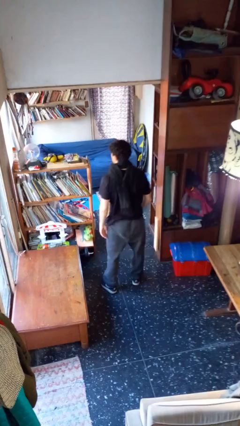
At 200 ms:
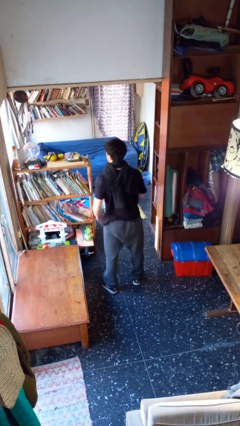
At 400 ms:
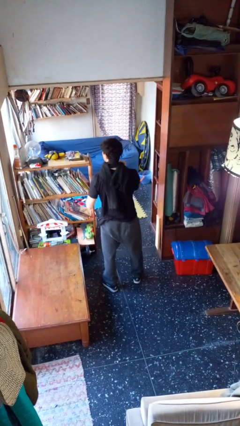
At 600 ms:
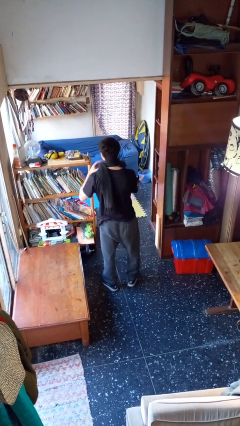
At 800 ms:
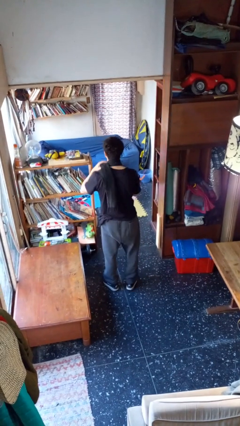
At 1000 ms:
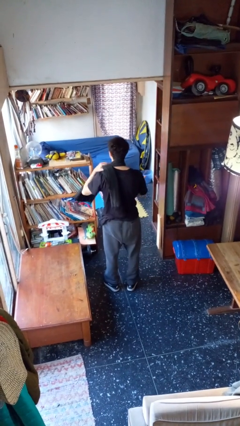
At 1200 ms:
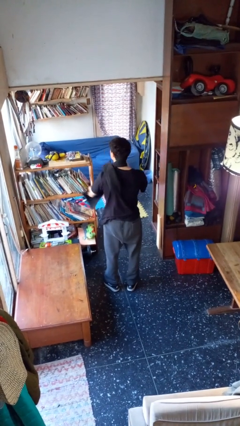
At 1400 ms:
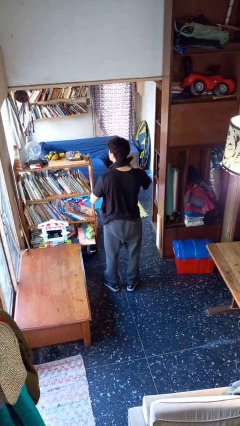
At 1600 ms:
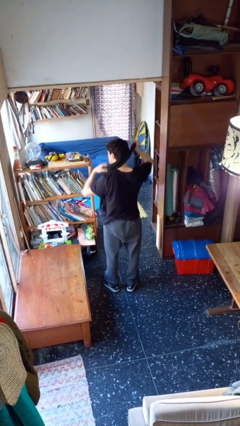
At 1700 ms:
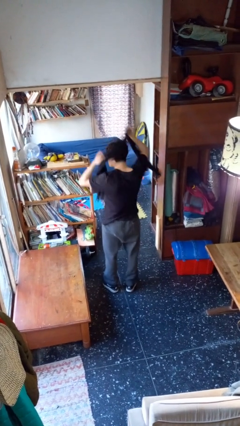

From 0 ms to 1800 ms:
person takes off scarf

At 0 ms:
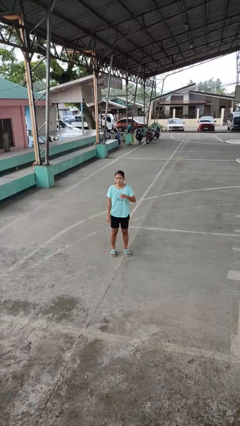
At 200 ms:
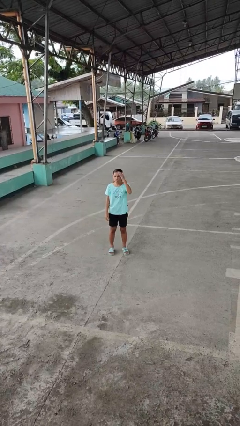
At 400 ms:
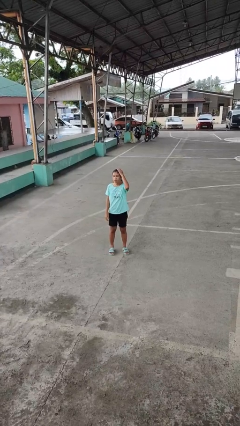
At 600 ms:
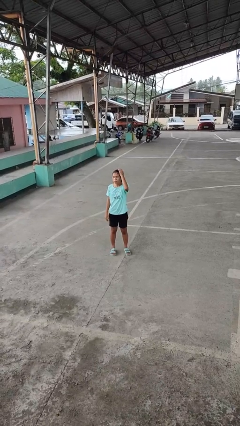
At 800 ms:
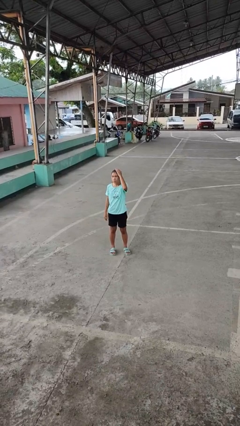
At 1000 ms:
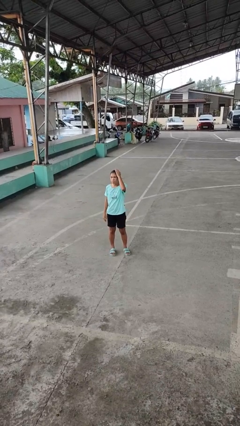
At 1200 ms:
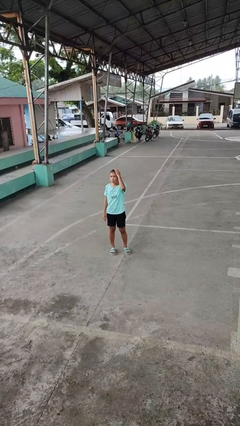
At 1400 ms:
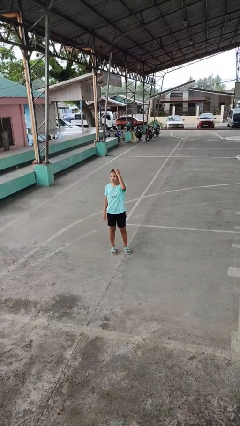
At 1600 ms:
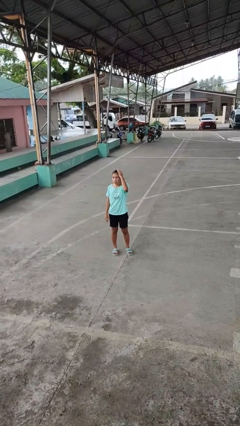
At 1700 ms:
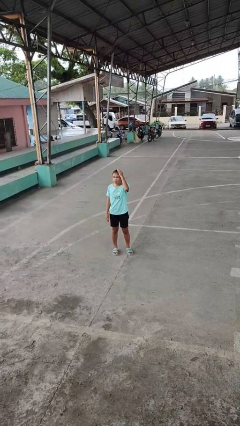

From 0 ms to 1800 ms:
person pats head

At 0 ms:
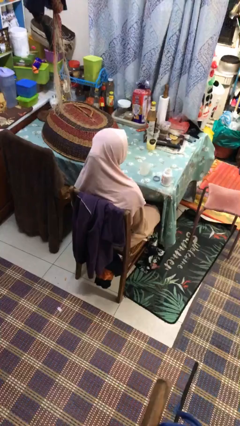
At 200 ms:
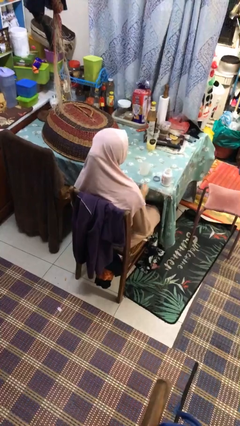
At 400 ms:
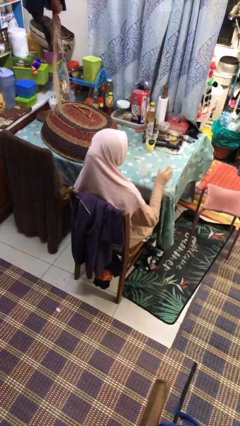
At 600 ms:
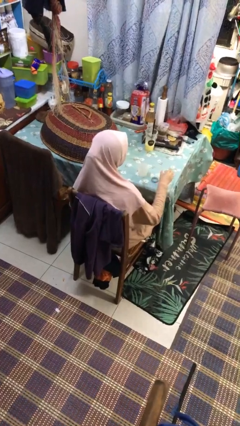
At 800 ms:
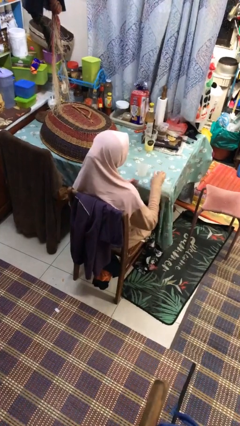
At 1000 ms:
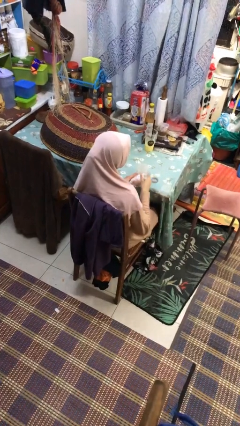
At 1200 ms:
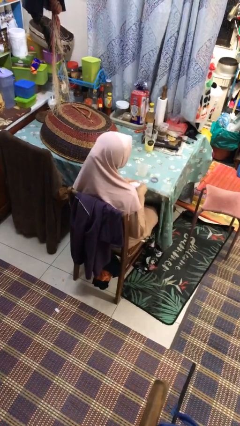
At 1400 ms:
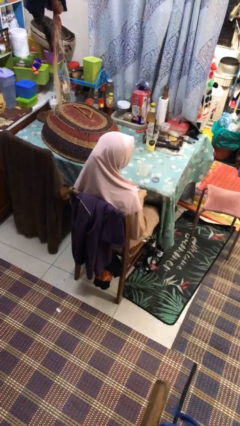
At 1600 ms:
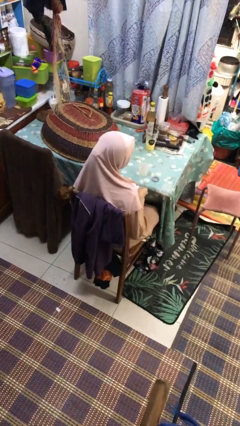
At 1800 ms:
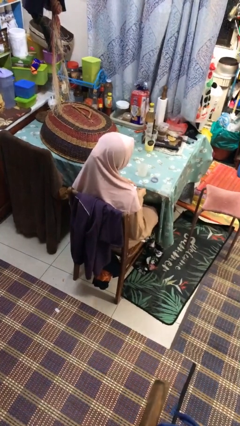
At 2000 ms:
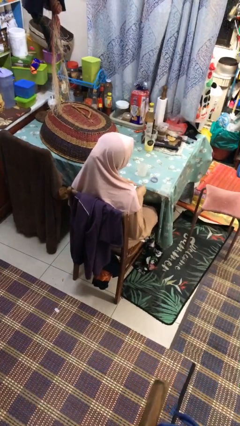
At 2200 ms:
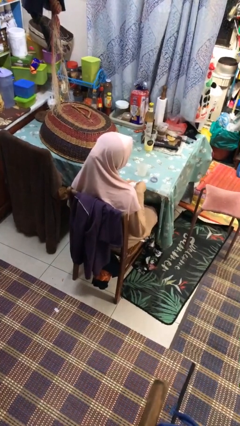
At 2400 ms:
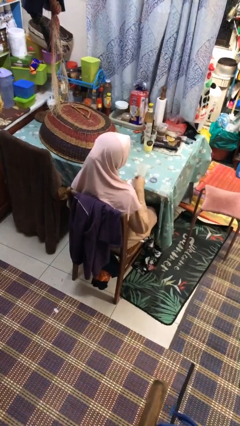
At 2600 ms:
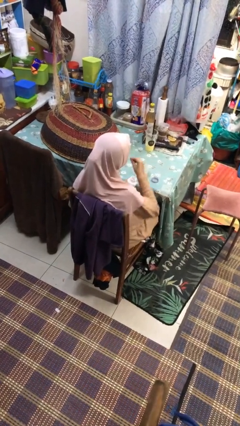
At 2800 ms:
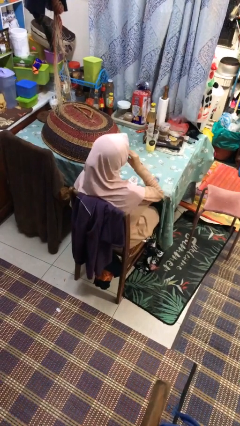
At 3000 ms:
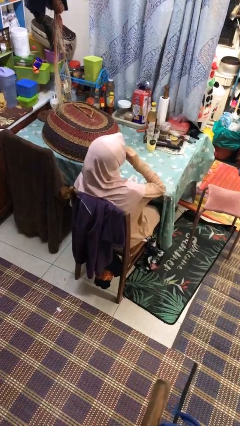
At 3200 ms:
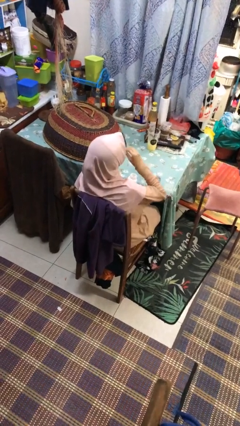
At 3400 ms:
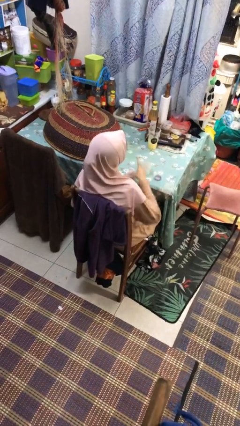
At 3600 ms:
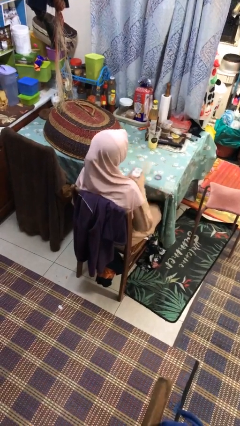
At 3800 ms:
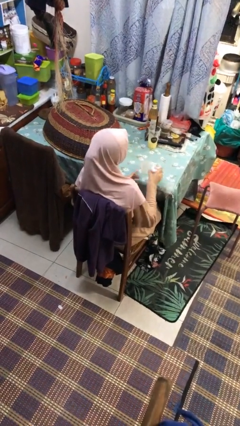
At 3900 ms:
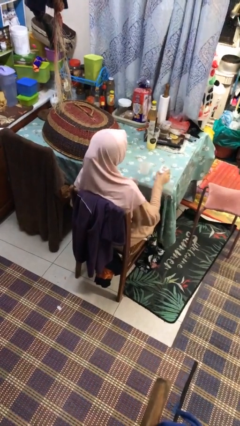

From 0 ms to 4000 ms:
person takes medicine pills

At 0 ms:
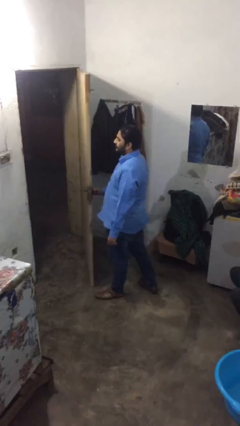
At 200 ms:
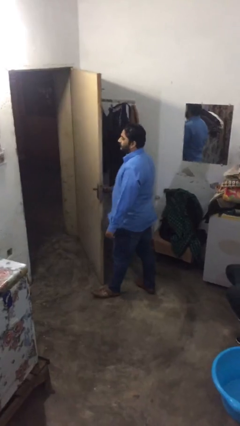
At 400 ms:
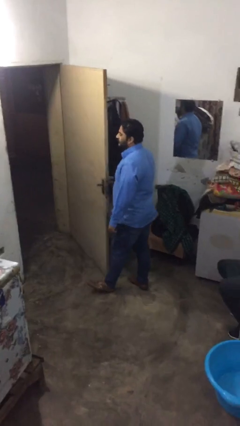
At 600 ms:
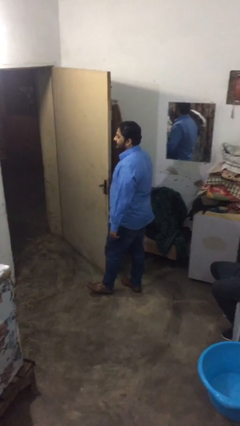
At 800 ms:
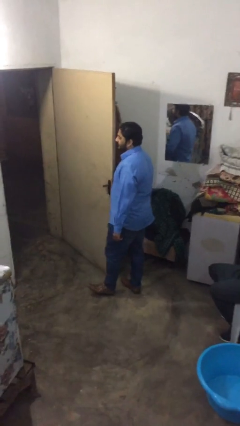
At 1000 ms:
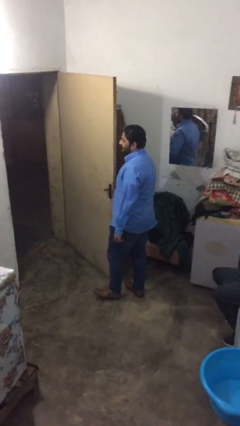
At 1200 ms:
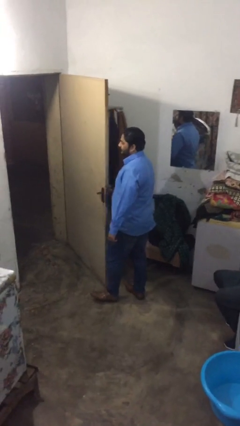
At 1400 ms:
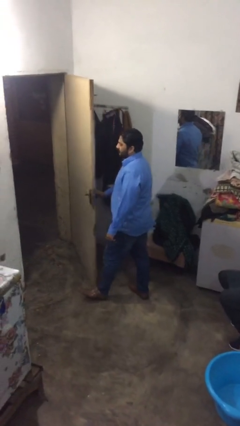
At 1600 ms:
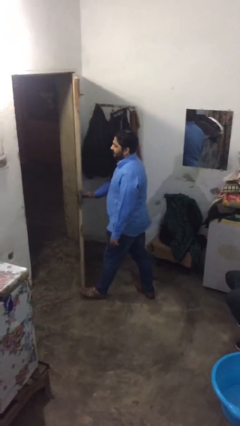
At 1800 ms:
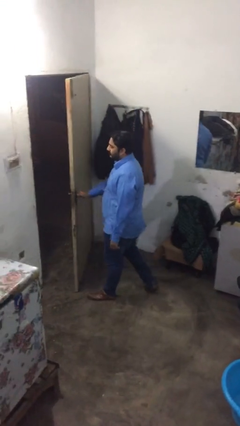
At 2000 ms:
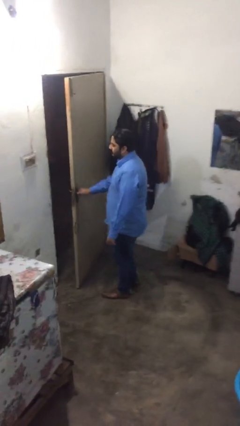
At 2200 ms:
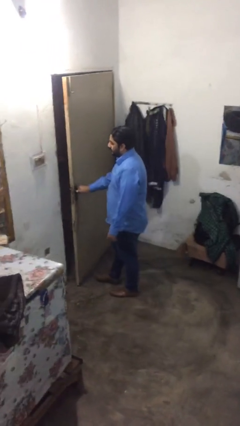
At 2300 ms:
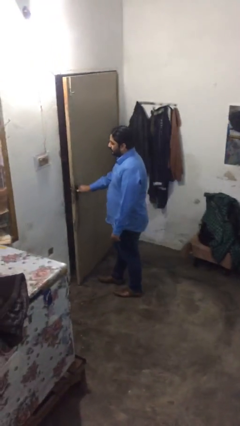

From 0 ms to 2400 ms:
person closes facility door

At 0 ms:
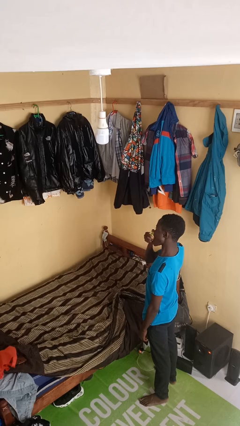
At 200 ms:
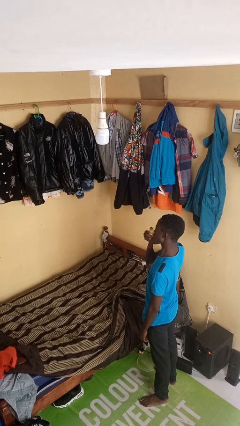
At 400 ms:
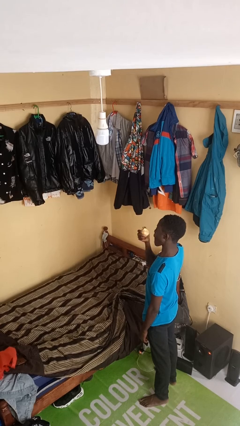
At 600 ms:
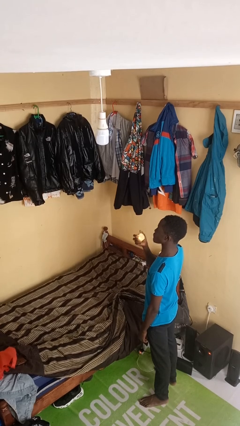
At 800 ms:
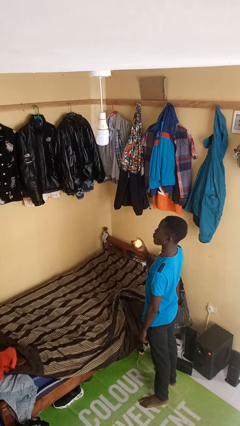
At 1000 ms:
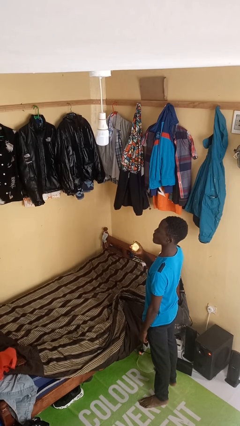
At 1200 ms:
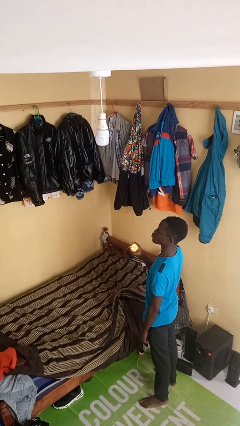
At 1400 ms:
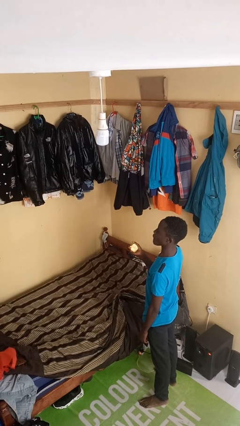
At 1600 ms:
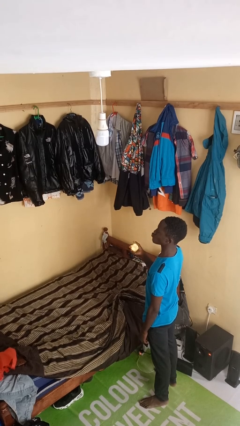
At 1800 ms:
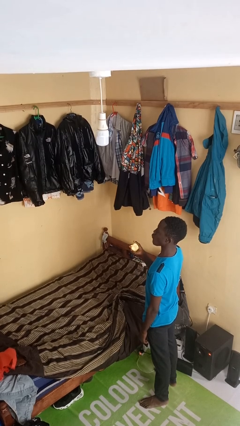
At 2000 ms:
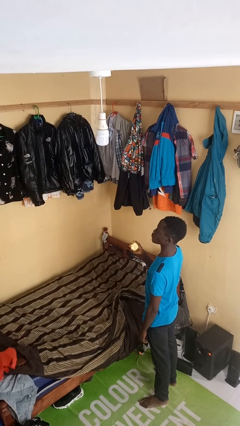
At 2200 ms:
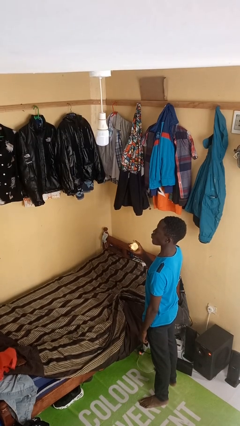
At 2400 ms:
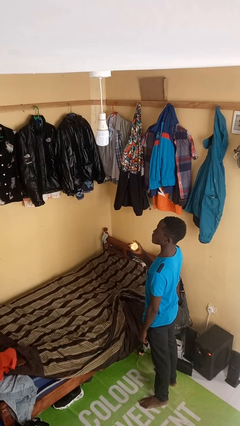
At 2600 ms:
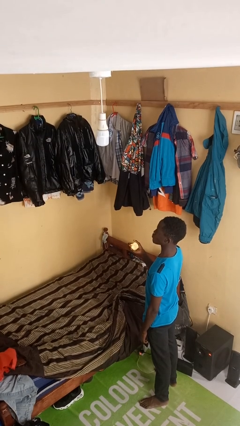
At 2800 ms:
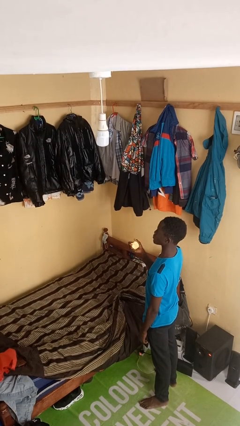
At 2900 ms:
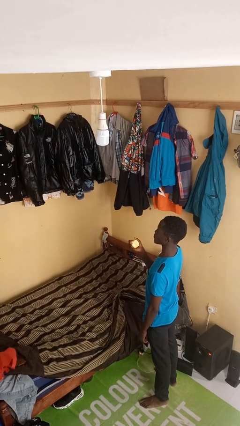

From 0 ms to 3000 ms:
person eats apple

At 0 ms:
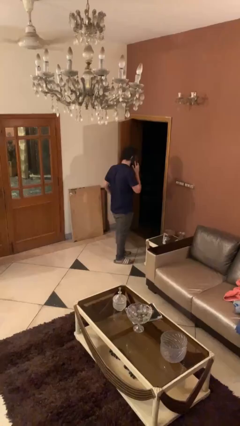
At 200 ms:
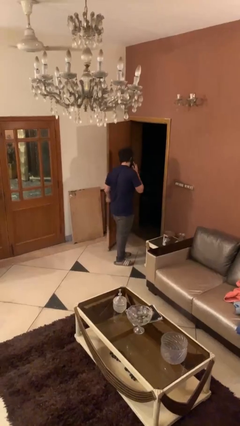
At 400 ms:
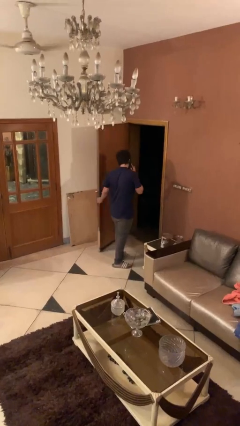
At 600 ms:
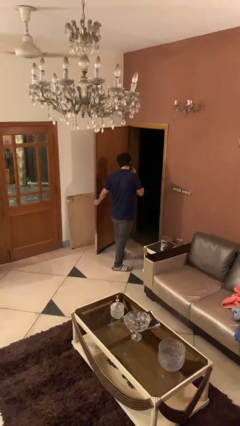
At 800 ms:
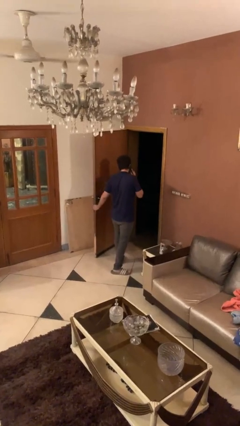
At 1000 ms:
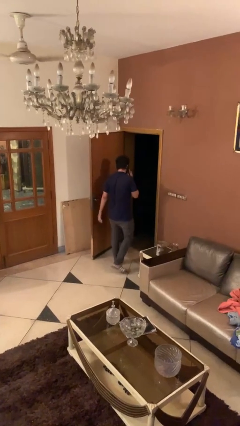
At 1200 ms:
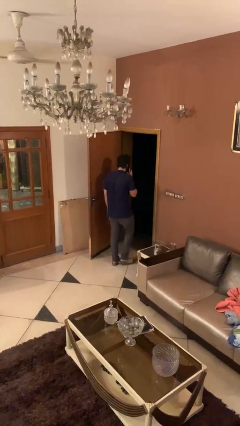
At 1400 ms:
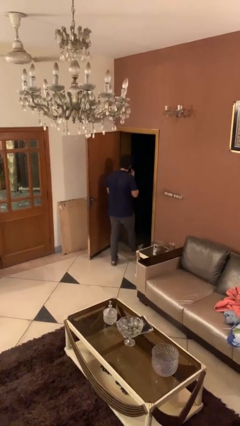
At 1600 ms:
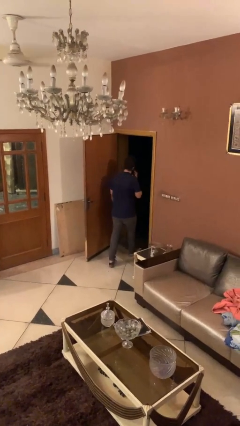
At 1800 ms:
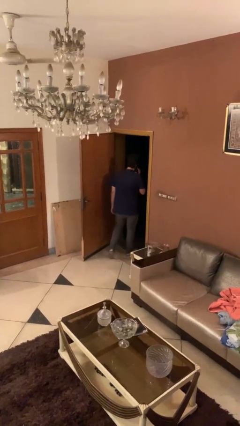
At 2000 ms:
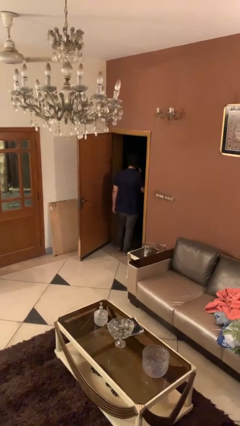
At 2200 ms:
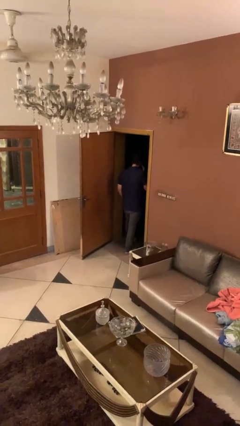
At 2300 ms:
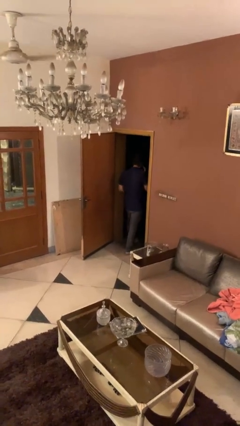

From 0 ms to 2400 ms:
person exits scene through structure

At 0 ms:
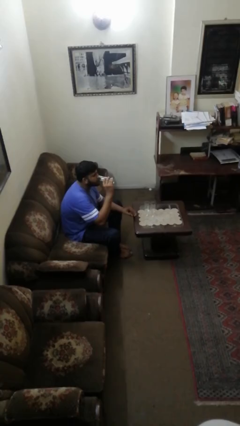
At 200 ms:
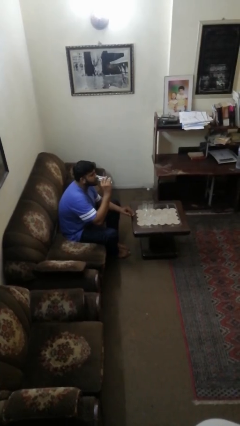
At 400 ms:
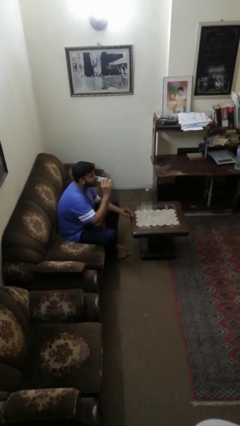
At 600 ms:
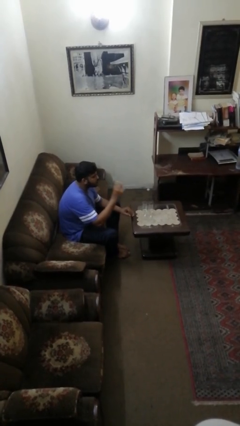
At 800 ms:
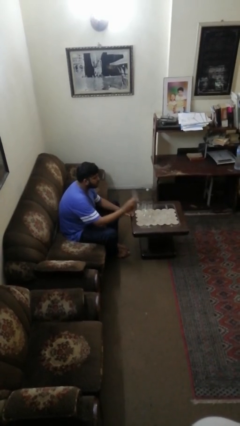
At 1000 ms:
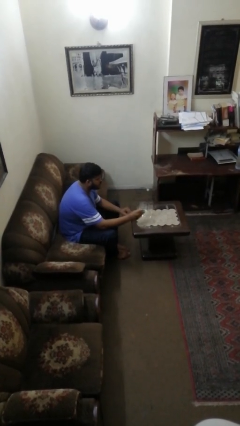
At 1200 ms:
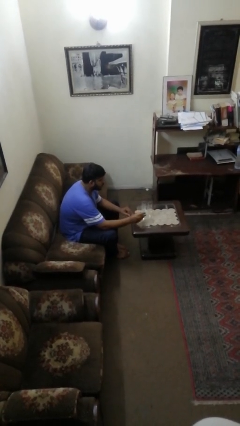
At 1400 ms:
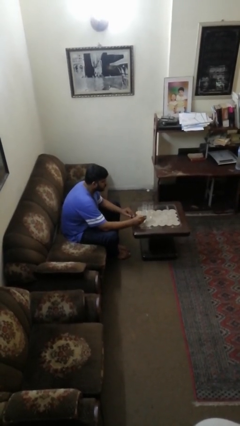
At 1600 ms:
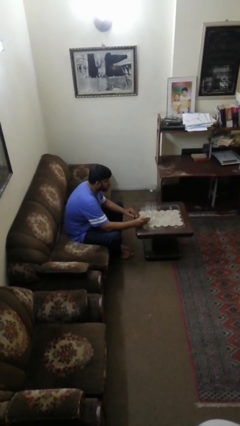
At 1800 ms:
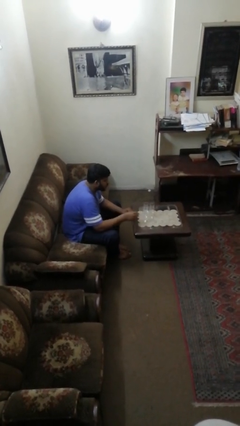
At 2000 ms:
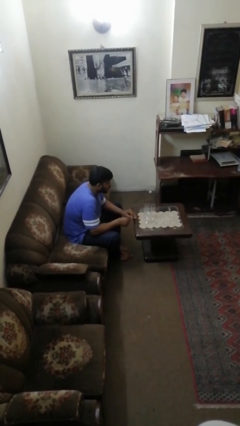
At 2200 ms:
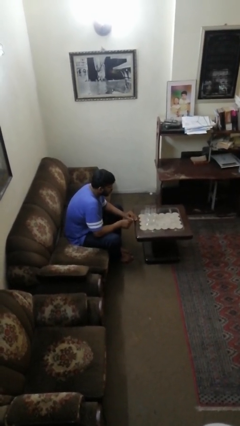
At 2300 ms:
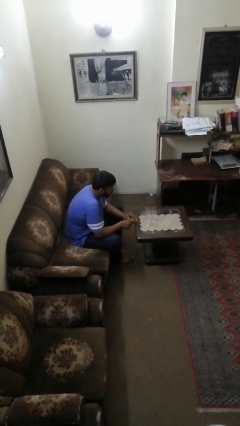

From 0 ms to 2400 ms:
person puts down object on table
